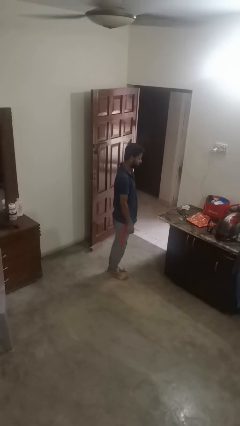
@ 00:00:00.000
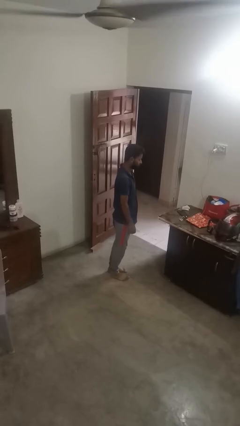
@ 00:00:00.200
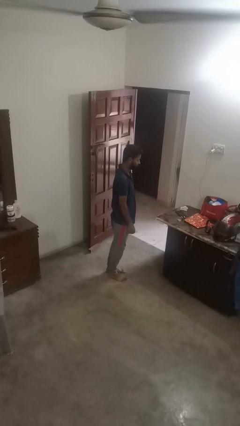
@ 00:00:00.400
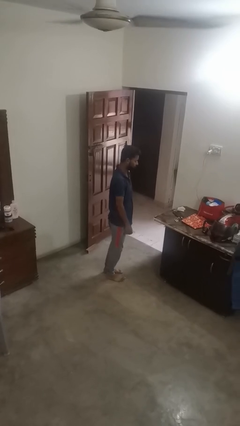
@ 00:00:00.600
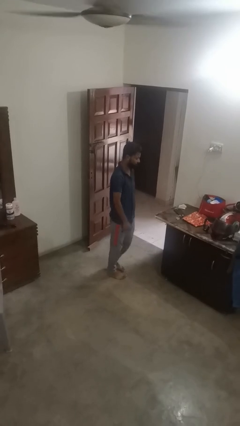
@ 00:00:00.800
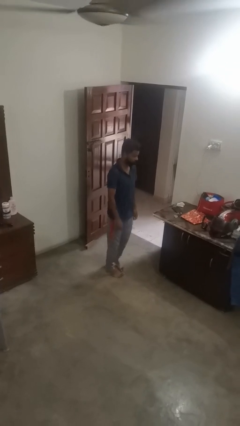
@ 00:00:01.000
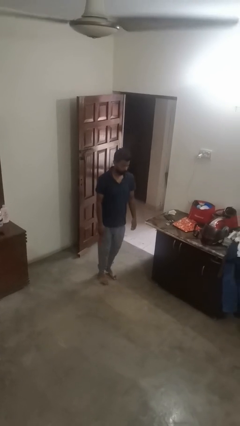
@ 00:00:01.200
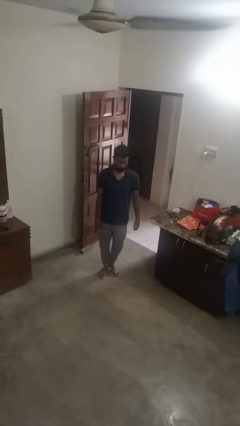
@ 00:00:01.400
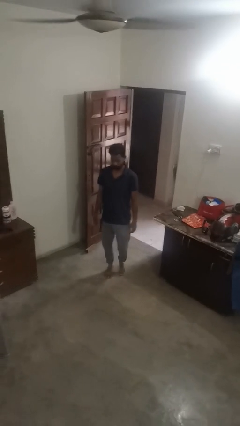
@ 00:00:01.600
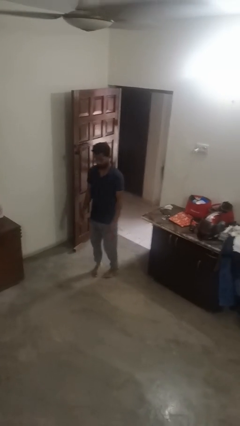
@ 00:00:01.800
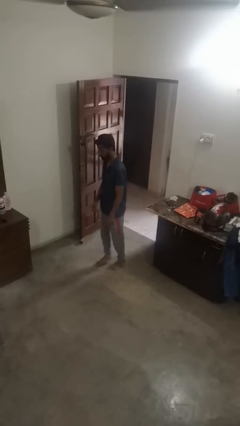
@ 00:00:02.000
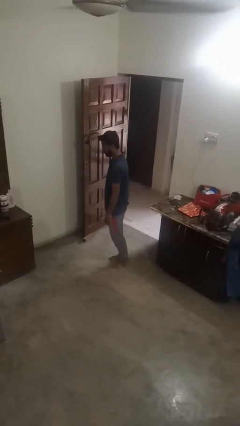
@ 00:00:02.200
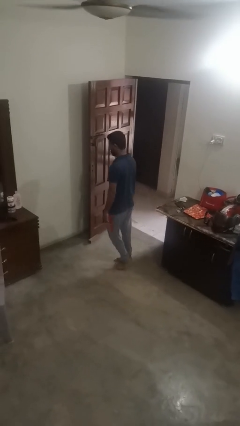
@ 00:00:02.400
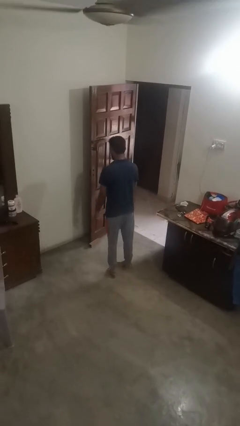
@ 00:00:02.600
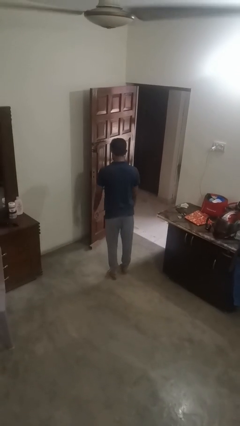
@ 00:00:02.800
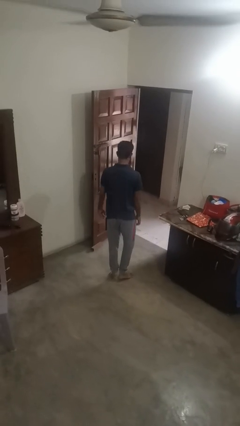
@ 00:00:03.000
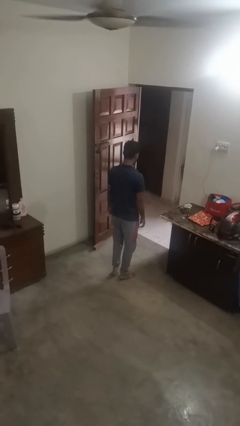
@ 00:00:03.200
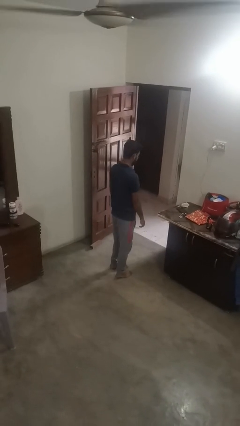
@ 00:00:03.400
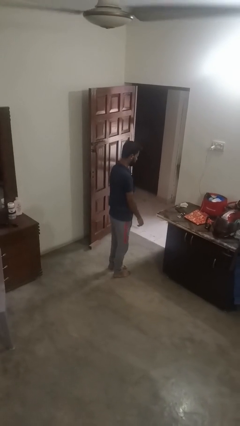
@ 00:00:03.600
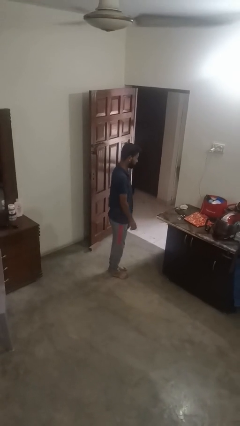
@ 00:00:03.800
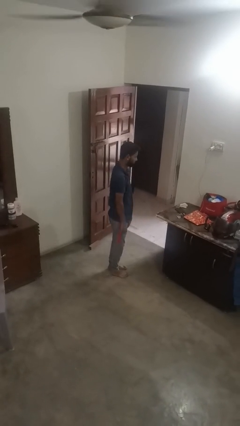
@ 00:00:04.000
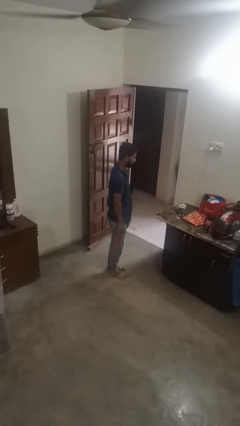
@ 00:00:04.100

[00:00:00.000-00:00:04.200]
person twirls

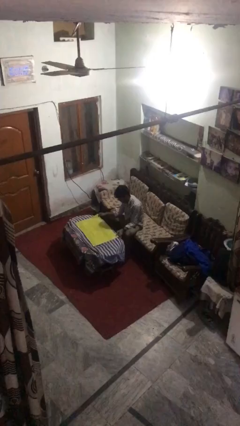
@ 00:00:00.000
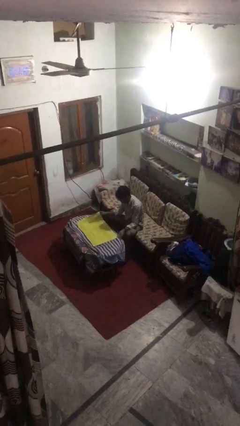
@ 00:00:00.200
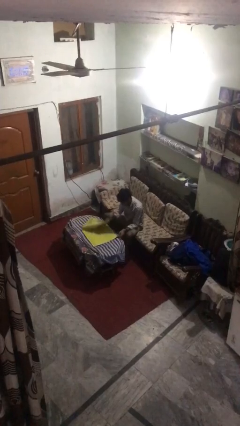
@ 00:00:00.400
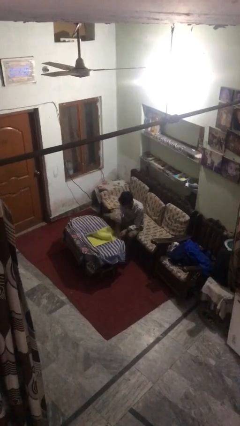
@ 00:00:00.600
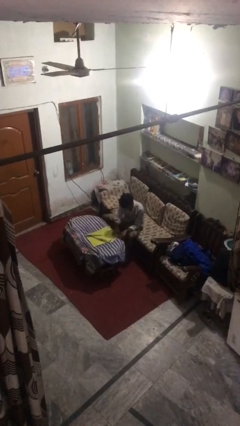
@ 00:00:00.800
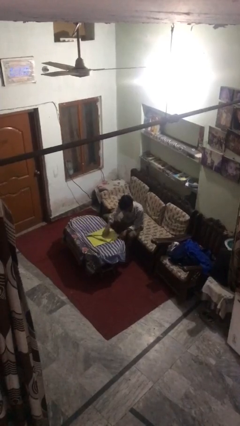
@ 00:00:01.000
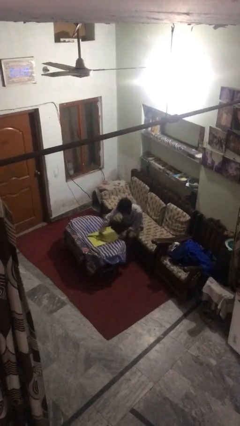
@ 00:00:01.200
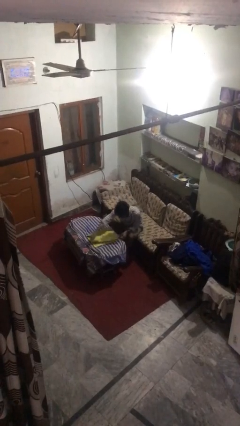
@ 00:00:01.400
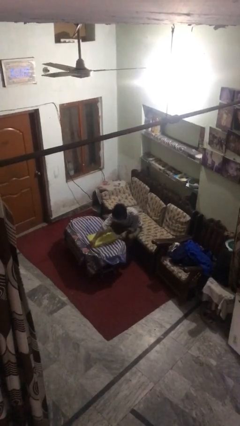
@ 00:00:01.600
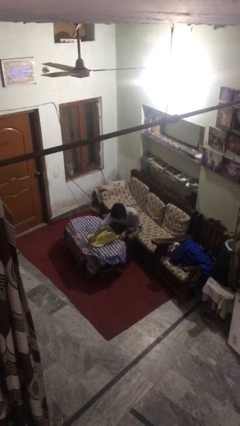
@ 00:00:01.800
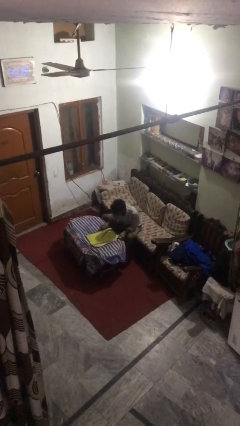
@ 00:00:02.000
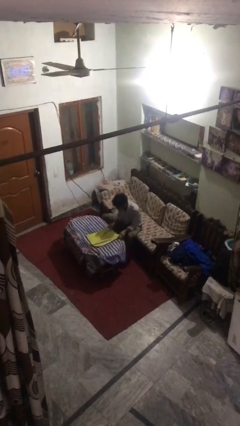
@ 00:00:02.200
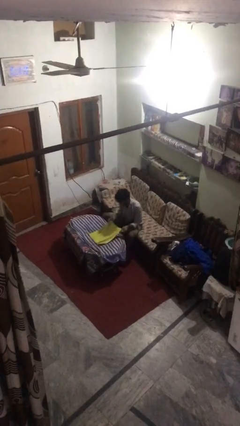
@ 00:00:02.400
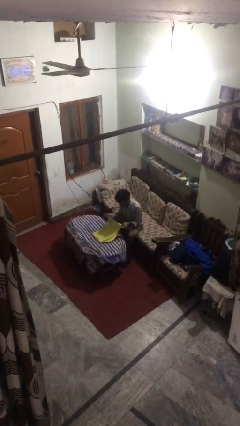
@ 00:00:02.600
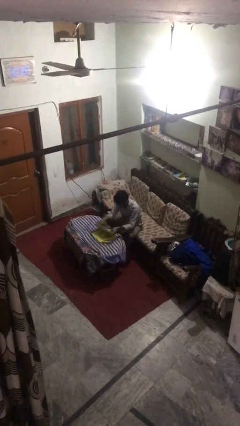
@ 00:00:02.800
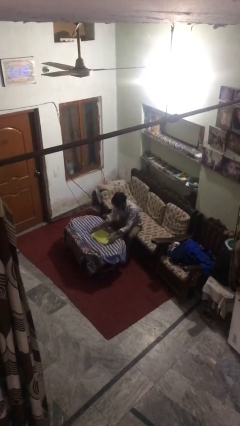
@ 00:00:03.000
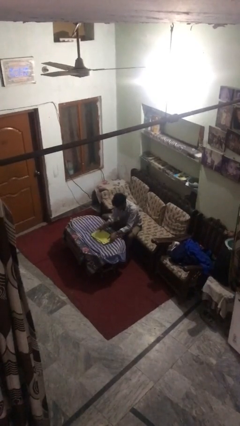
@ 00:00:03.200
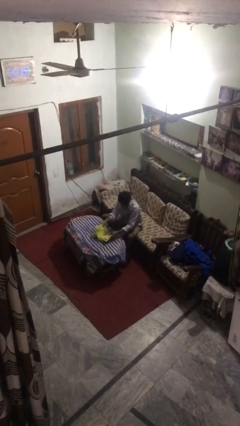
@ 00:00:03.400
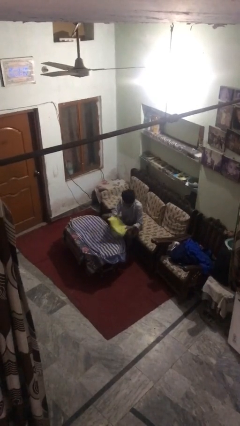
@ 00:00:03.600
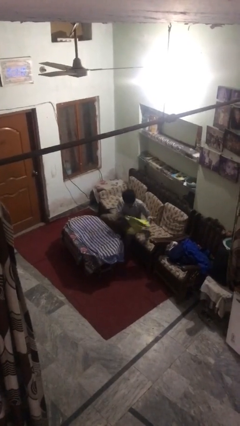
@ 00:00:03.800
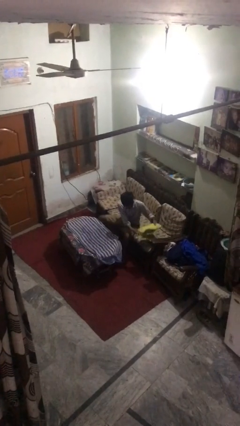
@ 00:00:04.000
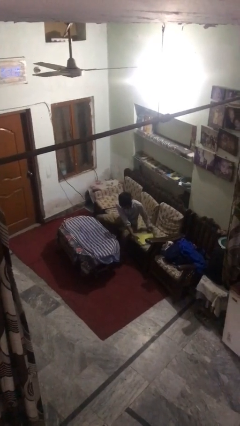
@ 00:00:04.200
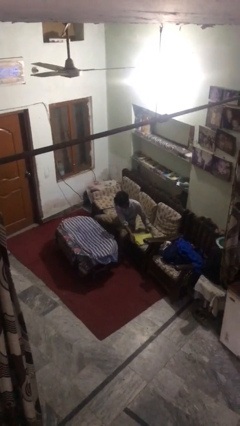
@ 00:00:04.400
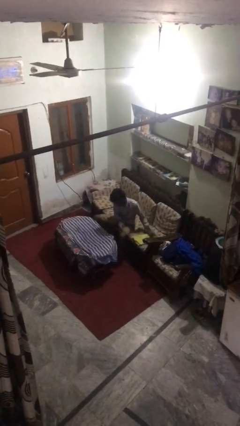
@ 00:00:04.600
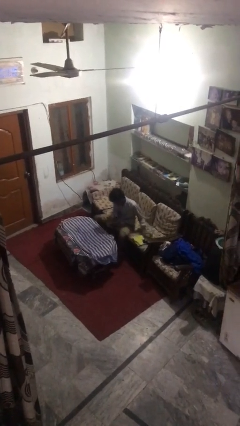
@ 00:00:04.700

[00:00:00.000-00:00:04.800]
person folds towel

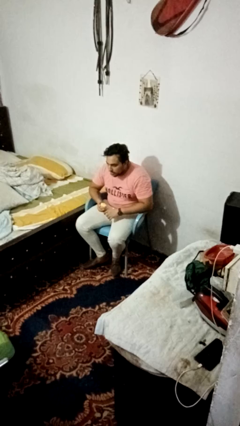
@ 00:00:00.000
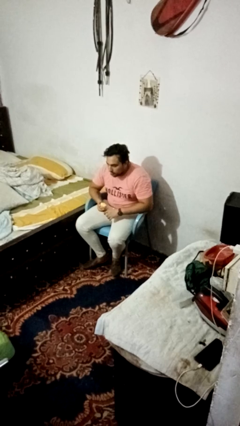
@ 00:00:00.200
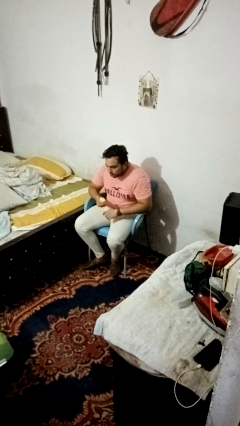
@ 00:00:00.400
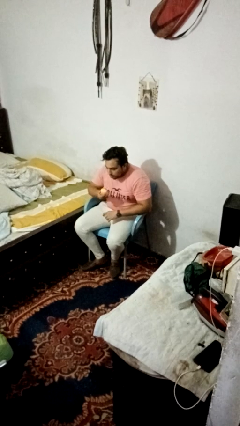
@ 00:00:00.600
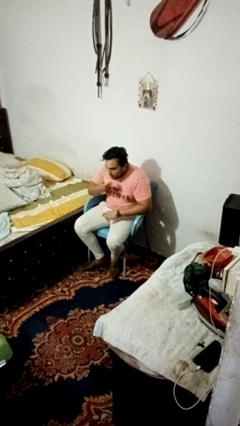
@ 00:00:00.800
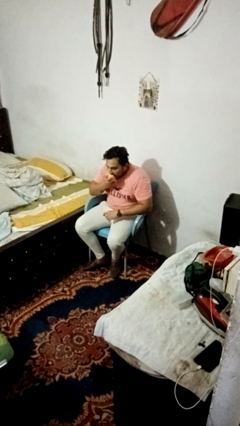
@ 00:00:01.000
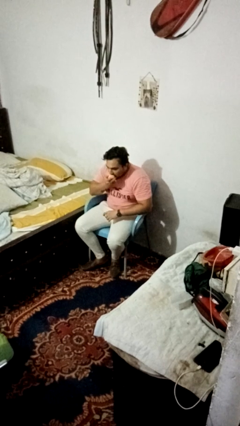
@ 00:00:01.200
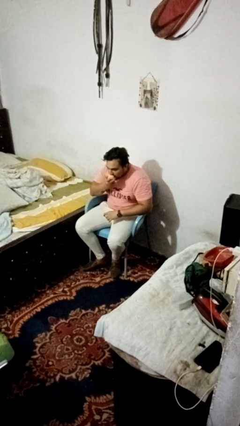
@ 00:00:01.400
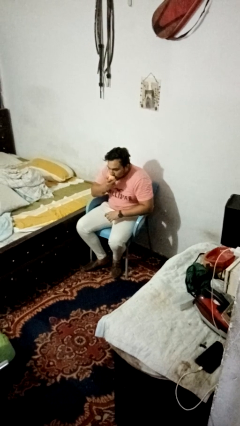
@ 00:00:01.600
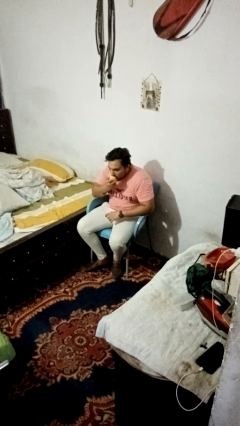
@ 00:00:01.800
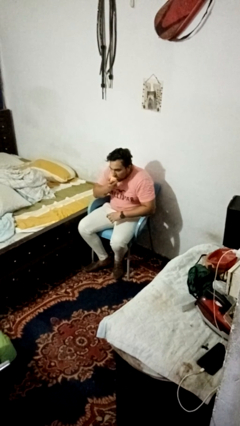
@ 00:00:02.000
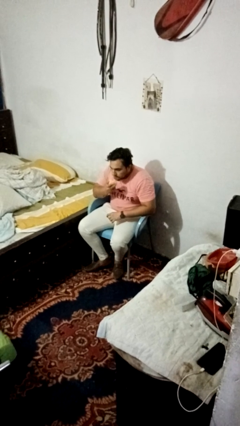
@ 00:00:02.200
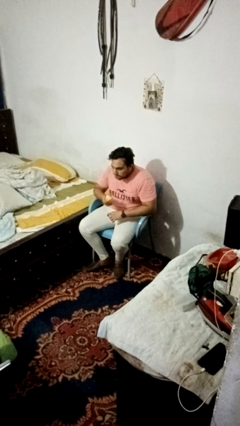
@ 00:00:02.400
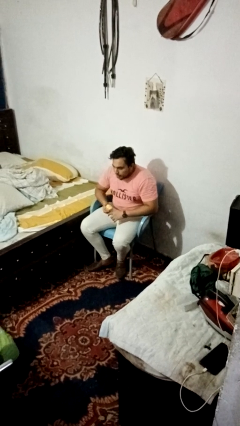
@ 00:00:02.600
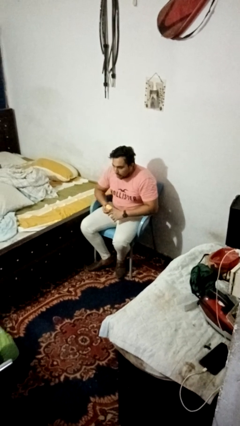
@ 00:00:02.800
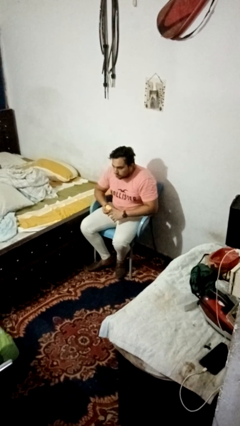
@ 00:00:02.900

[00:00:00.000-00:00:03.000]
person eats apple

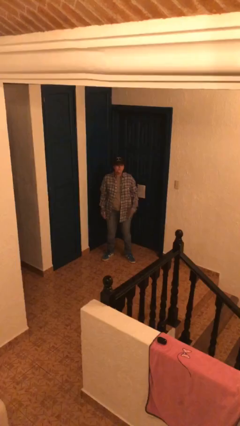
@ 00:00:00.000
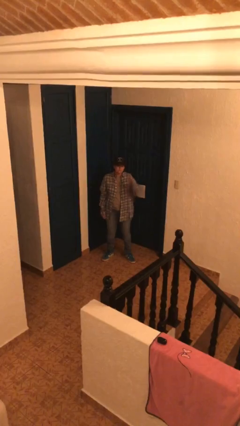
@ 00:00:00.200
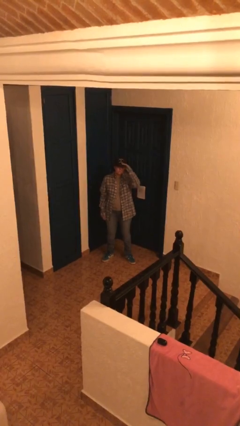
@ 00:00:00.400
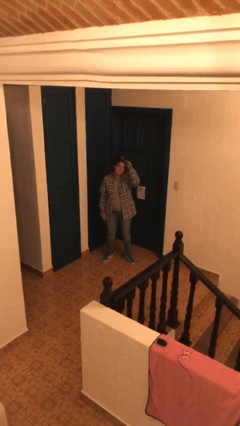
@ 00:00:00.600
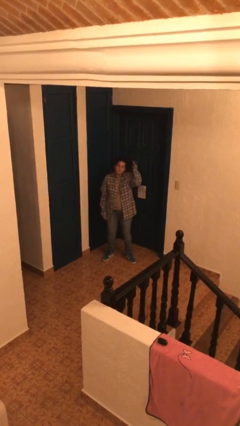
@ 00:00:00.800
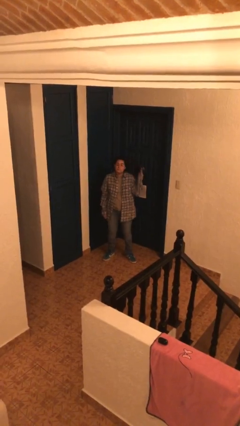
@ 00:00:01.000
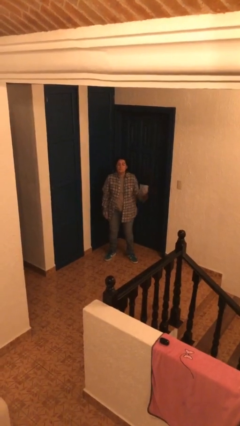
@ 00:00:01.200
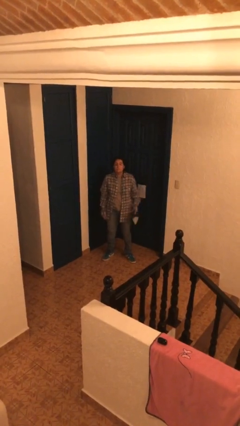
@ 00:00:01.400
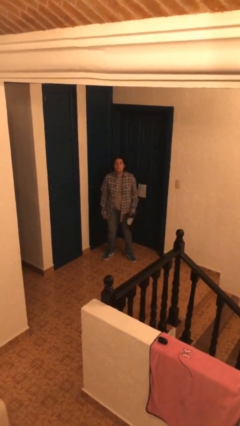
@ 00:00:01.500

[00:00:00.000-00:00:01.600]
person takes off hat

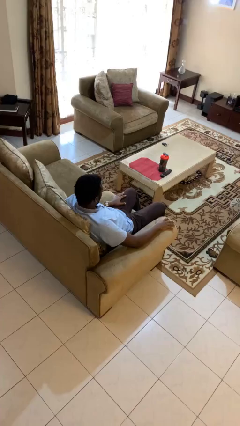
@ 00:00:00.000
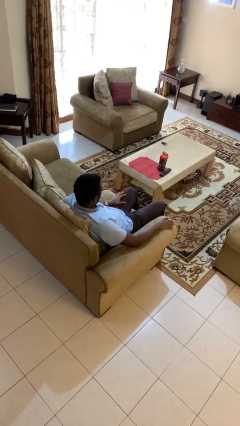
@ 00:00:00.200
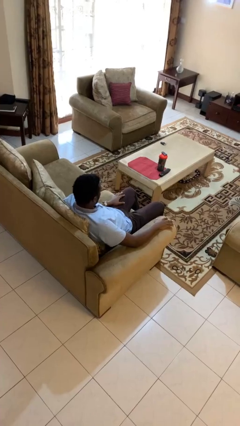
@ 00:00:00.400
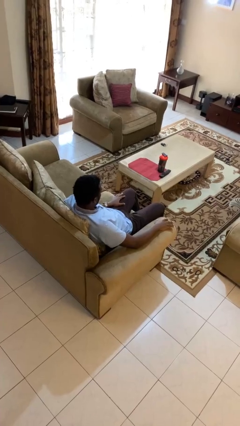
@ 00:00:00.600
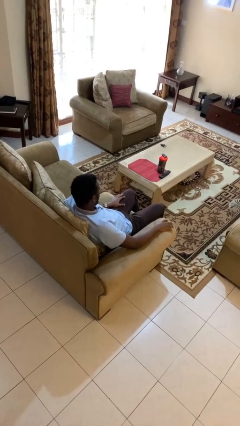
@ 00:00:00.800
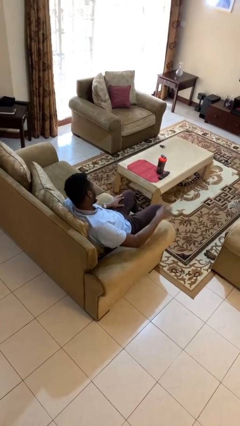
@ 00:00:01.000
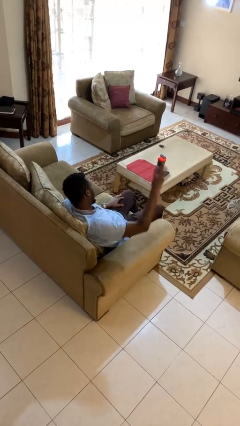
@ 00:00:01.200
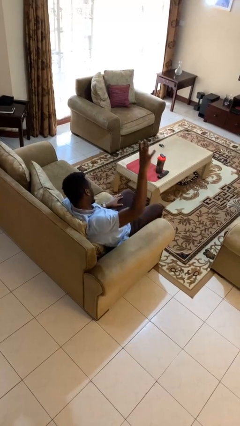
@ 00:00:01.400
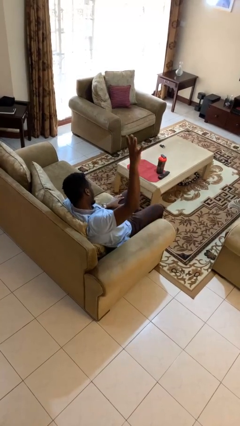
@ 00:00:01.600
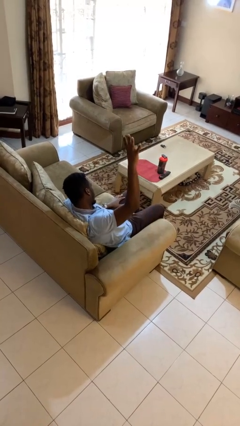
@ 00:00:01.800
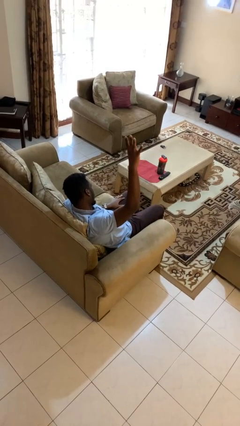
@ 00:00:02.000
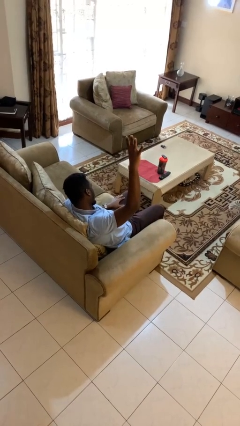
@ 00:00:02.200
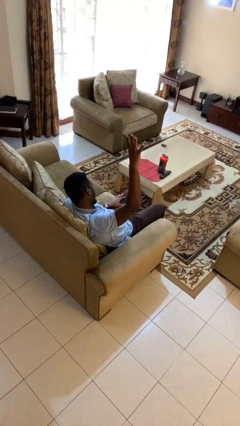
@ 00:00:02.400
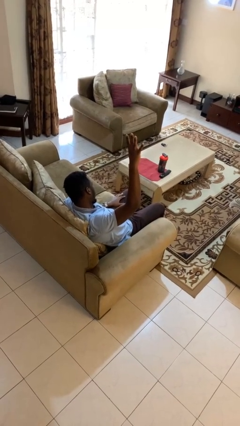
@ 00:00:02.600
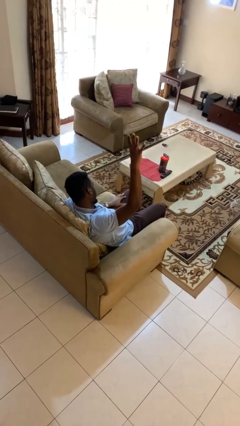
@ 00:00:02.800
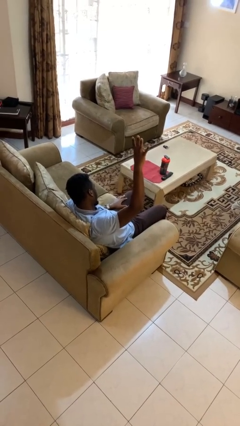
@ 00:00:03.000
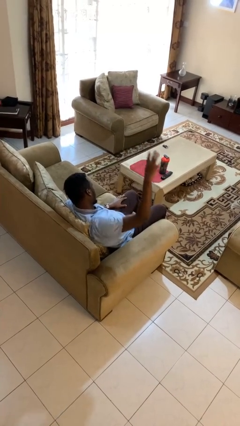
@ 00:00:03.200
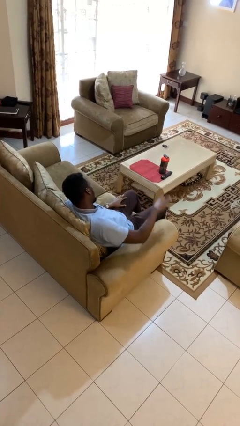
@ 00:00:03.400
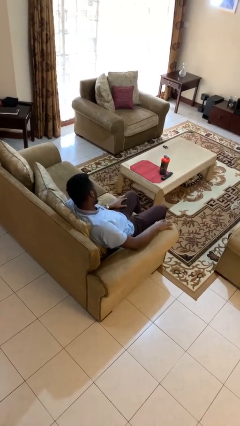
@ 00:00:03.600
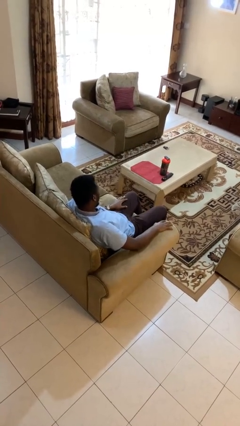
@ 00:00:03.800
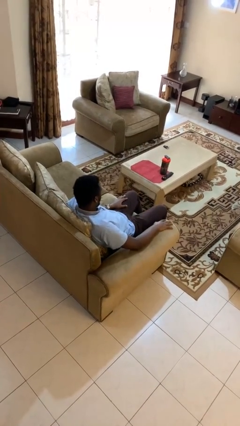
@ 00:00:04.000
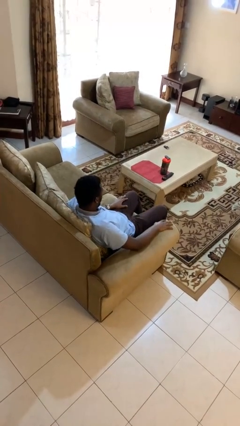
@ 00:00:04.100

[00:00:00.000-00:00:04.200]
person gestures number four
